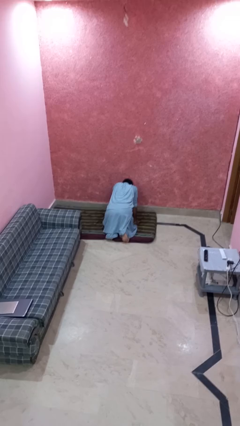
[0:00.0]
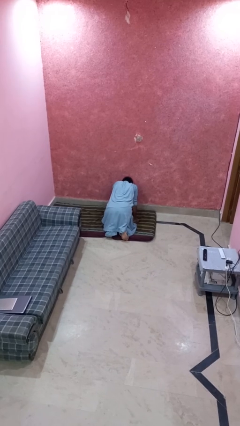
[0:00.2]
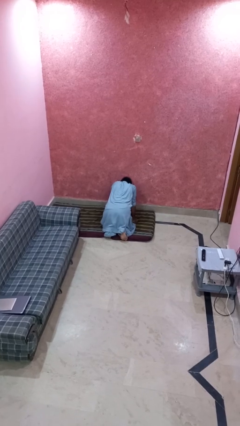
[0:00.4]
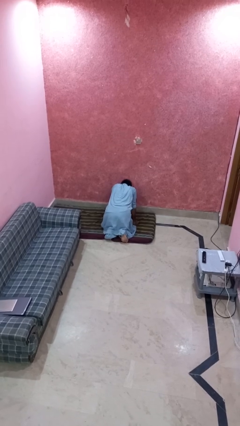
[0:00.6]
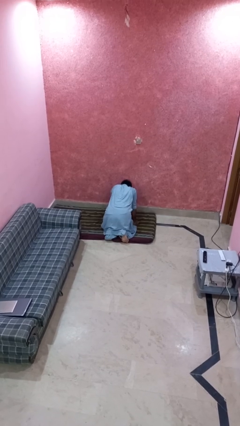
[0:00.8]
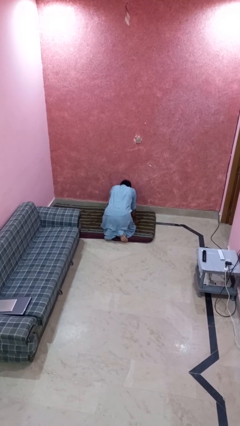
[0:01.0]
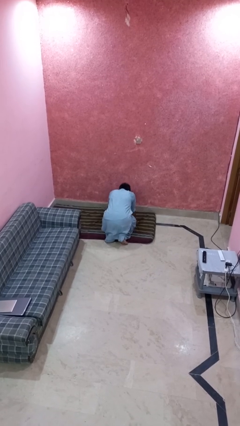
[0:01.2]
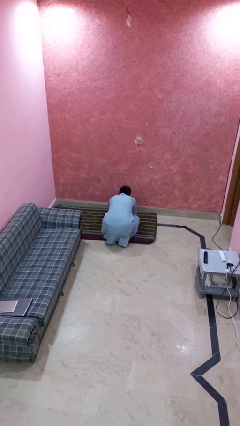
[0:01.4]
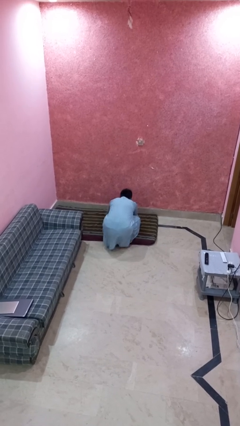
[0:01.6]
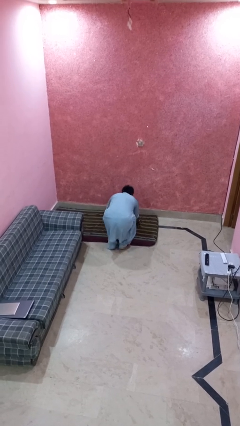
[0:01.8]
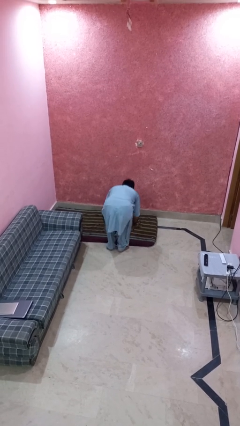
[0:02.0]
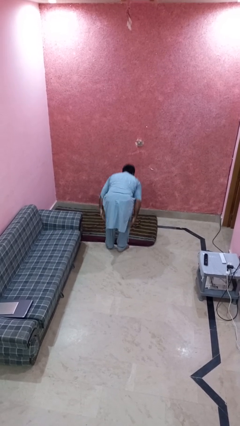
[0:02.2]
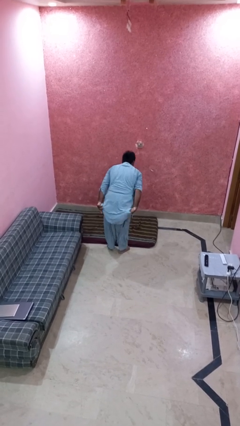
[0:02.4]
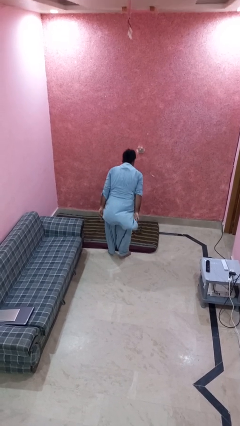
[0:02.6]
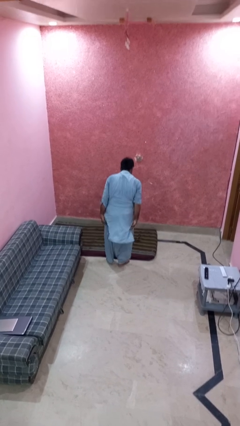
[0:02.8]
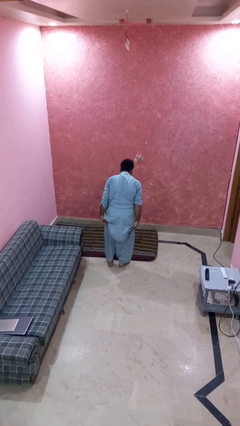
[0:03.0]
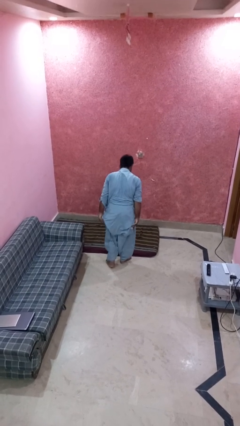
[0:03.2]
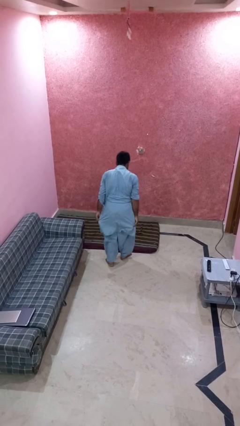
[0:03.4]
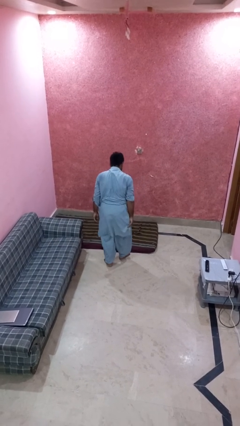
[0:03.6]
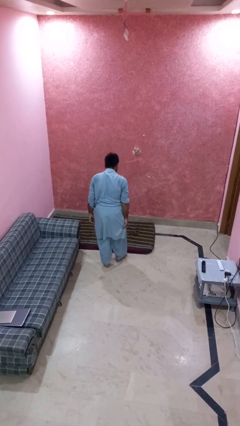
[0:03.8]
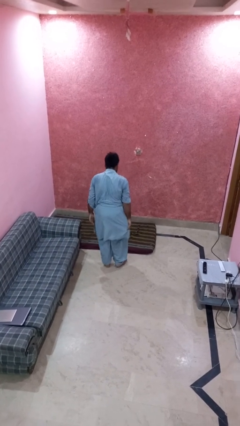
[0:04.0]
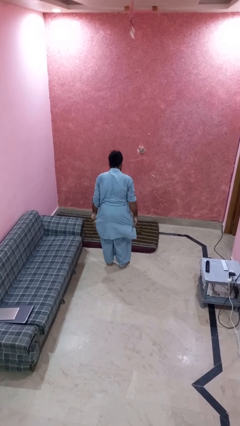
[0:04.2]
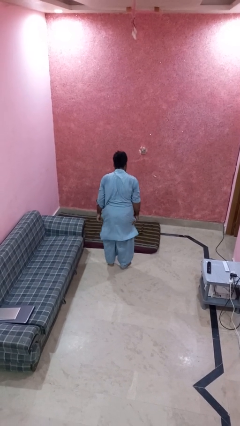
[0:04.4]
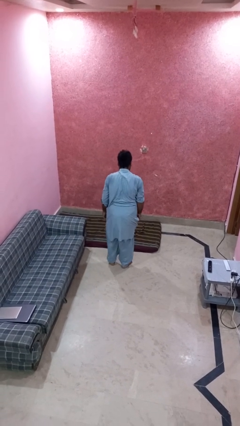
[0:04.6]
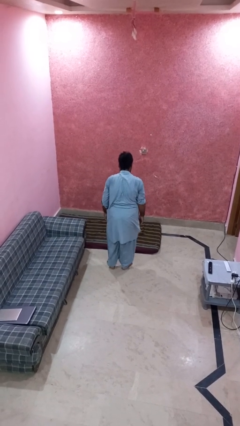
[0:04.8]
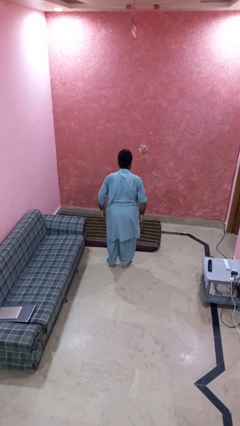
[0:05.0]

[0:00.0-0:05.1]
person stands up from floor

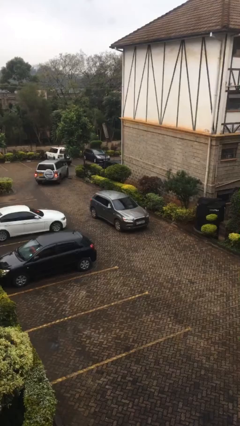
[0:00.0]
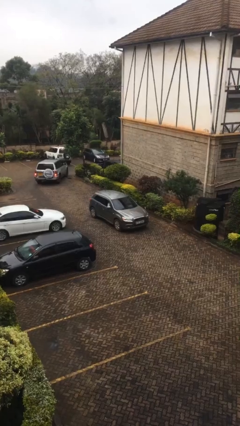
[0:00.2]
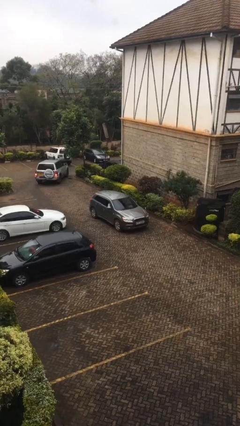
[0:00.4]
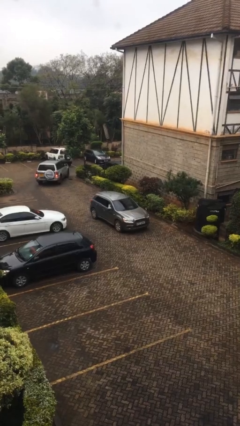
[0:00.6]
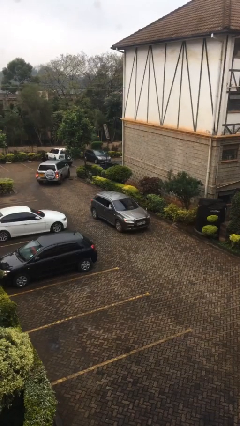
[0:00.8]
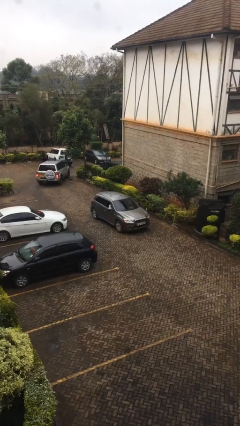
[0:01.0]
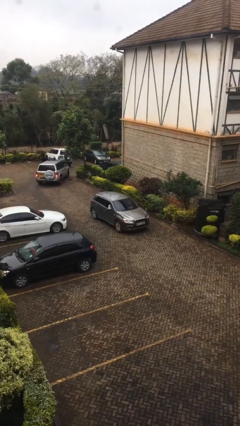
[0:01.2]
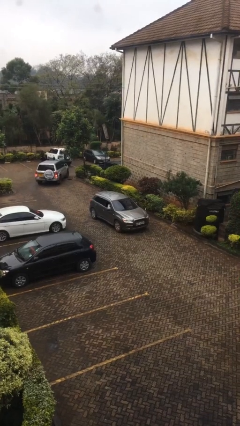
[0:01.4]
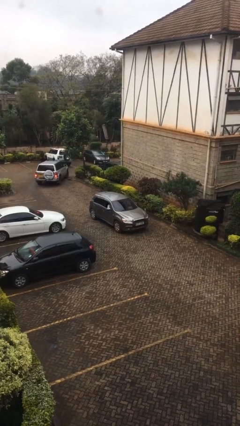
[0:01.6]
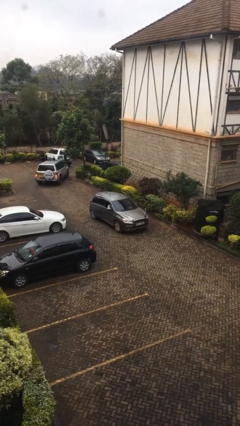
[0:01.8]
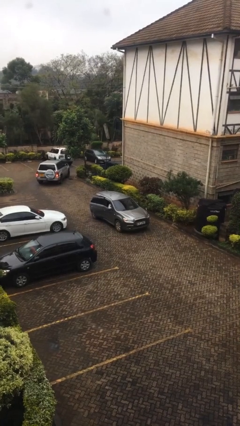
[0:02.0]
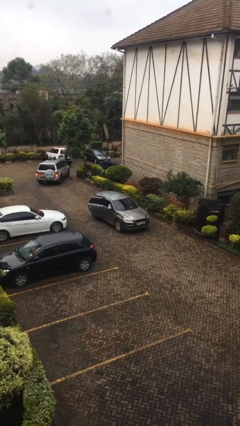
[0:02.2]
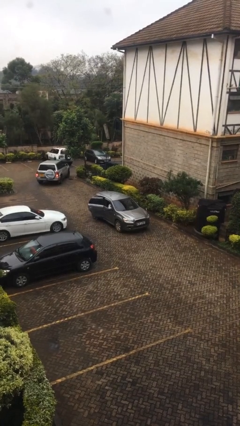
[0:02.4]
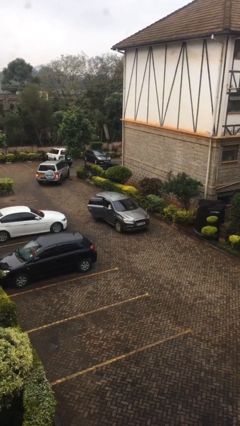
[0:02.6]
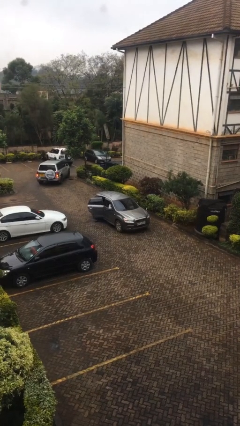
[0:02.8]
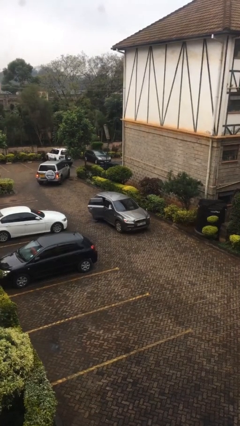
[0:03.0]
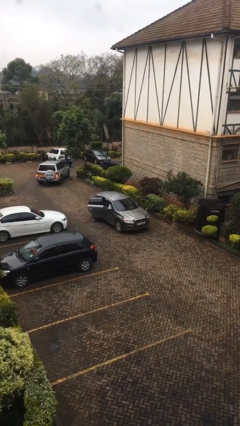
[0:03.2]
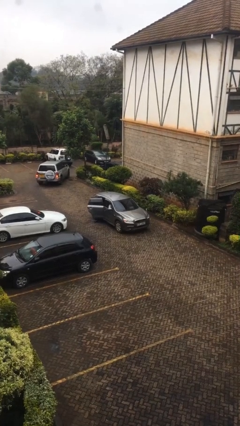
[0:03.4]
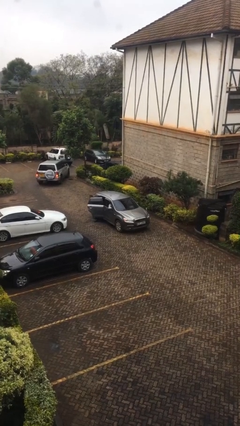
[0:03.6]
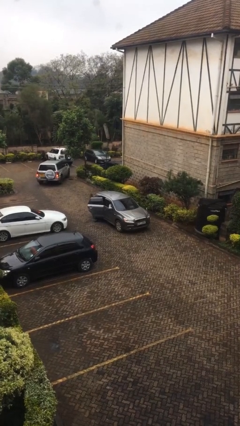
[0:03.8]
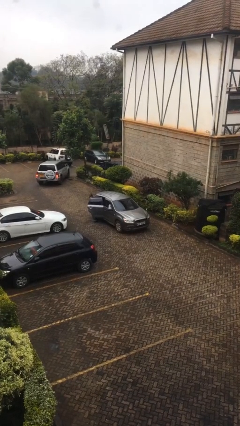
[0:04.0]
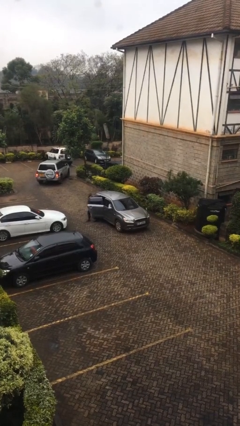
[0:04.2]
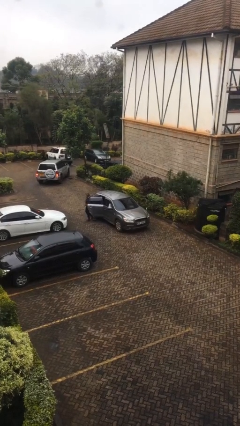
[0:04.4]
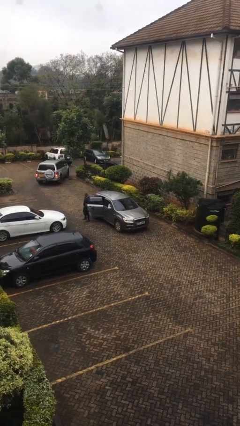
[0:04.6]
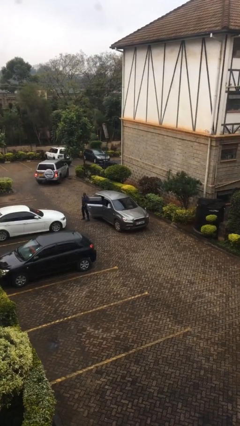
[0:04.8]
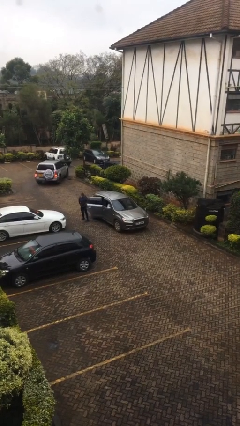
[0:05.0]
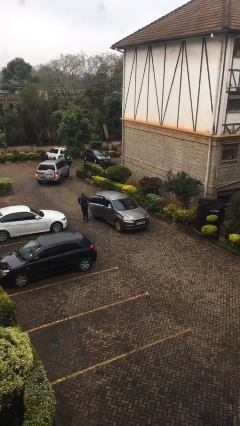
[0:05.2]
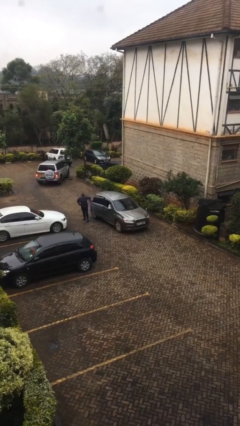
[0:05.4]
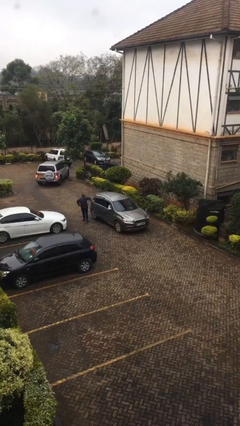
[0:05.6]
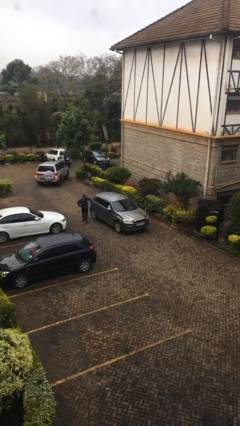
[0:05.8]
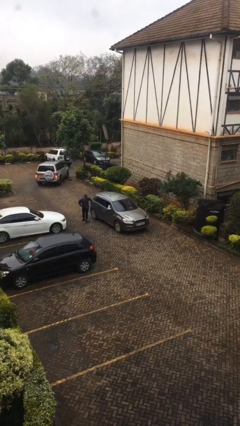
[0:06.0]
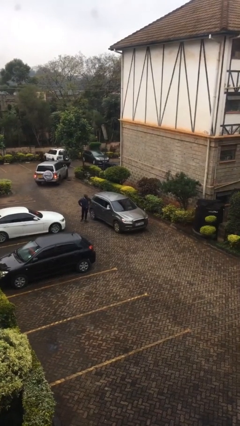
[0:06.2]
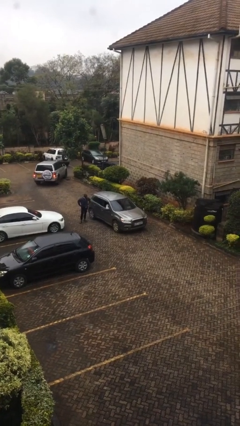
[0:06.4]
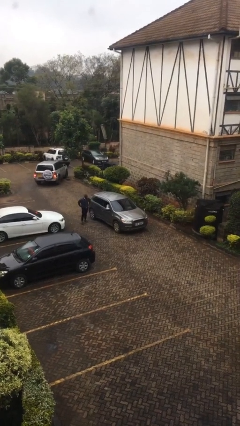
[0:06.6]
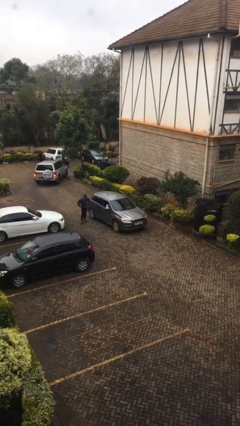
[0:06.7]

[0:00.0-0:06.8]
car drops off person

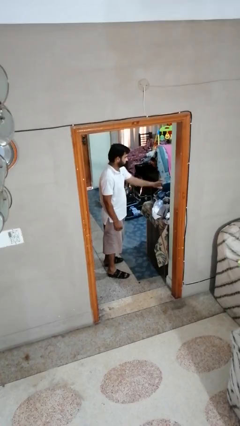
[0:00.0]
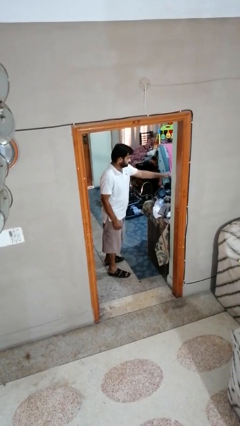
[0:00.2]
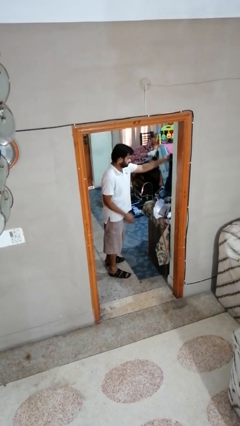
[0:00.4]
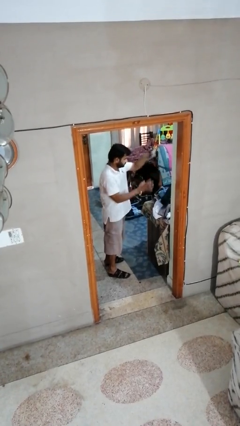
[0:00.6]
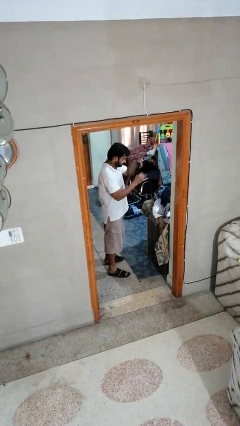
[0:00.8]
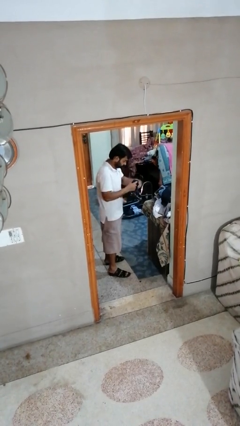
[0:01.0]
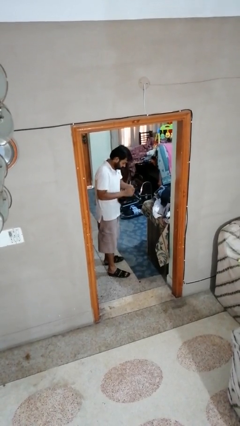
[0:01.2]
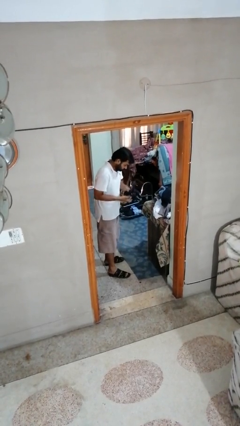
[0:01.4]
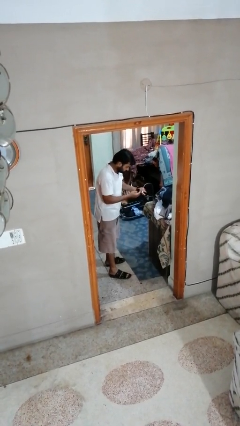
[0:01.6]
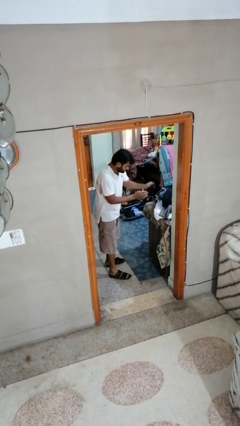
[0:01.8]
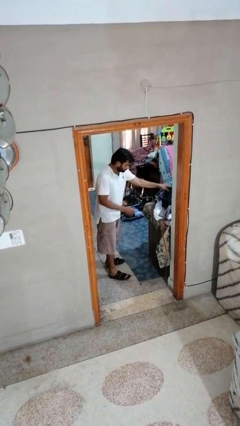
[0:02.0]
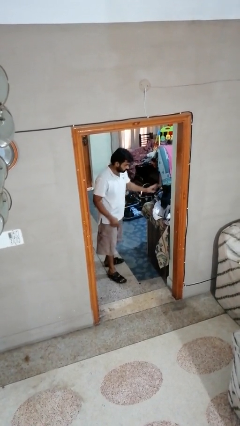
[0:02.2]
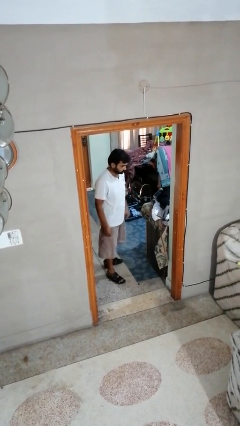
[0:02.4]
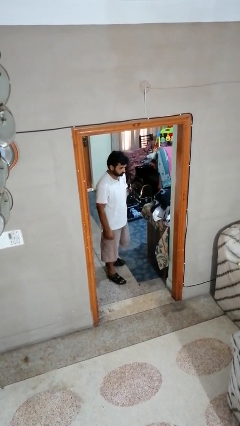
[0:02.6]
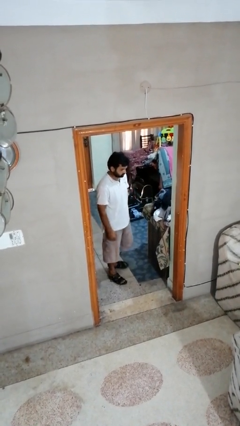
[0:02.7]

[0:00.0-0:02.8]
person folds socks

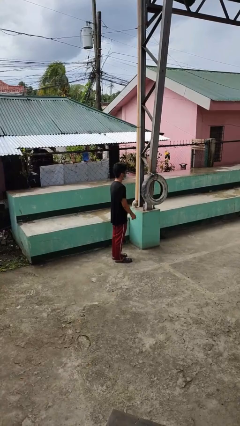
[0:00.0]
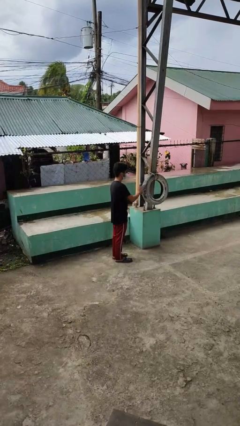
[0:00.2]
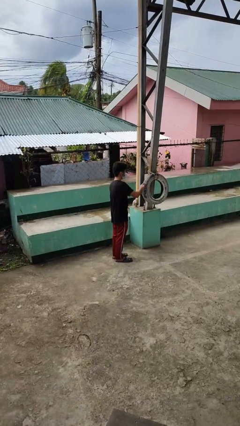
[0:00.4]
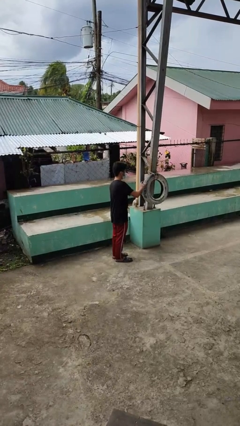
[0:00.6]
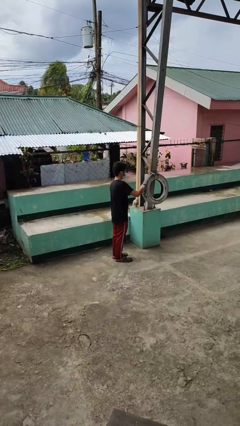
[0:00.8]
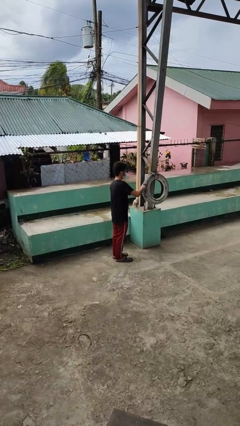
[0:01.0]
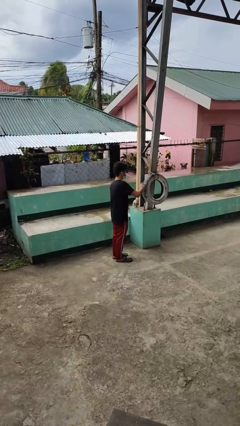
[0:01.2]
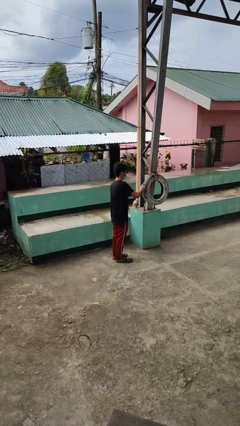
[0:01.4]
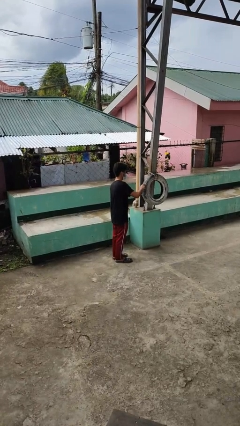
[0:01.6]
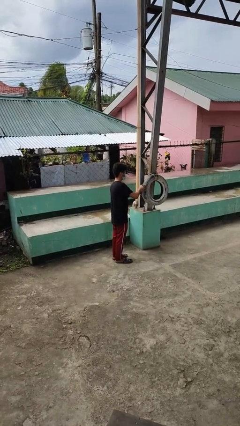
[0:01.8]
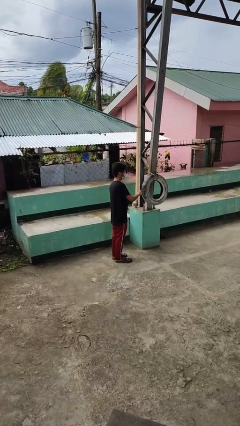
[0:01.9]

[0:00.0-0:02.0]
person taps object with finger

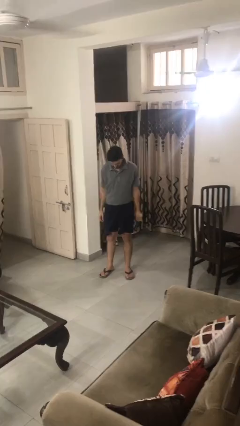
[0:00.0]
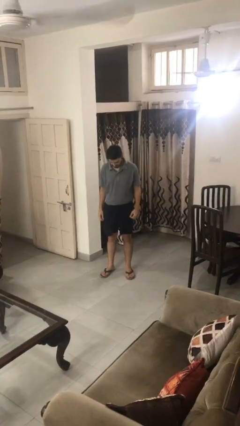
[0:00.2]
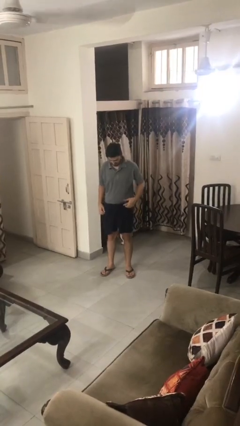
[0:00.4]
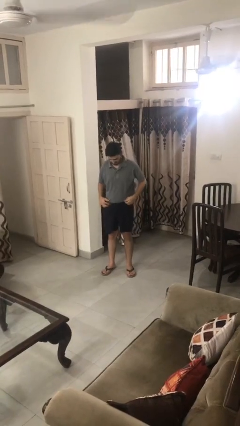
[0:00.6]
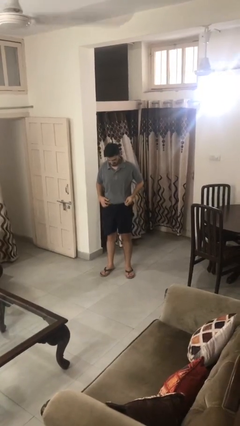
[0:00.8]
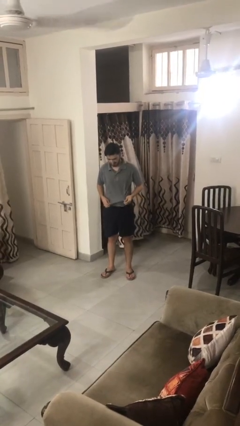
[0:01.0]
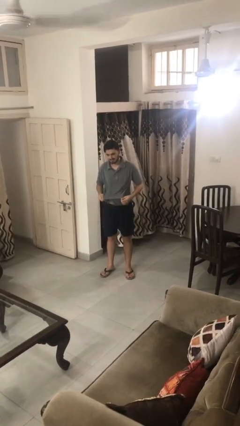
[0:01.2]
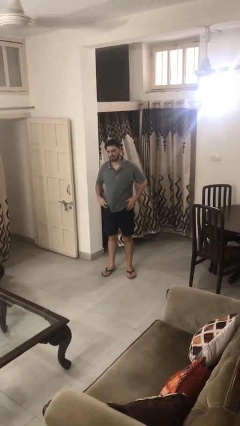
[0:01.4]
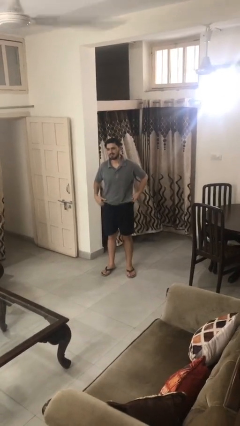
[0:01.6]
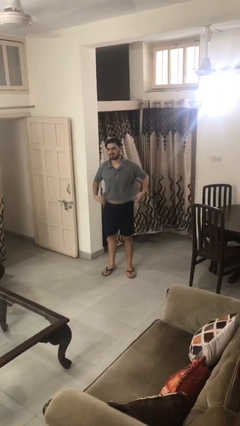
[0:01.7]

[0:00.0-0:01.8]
person untucks shirt
